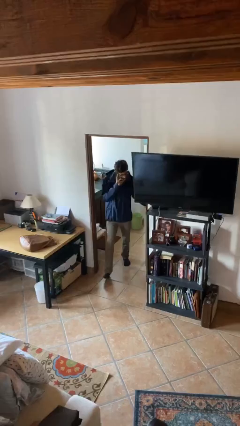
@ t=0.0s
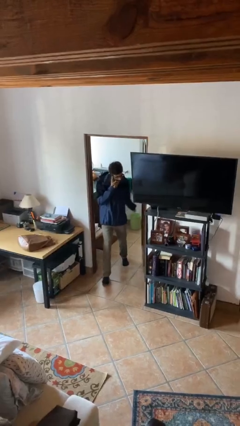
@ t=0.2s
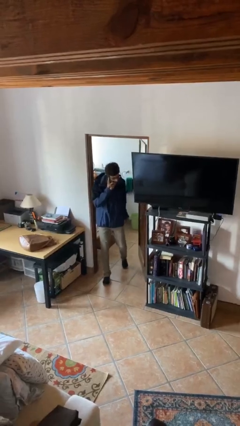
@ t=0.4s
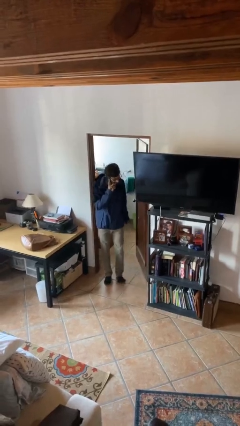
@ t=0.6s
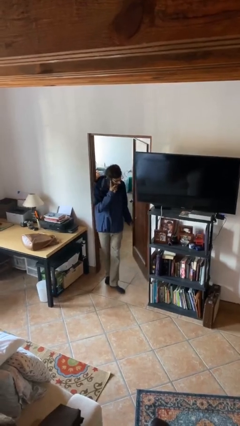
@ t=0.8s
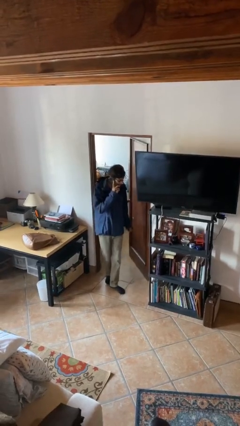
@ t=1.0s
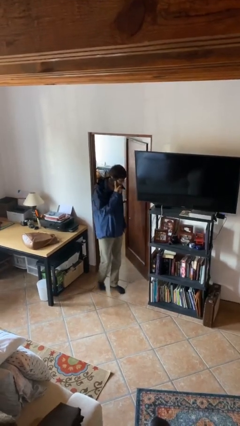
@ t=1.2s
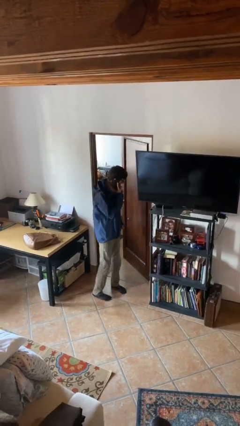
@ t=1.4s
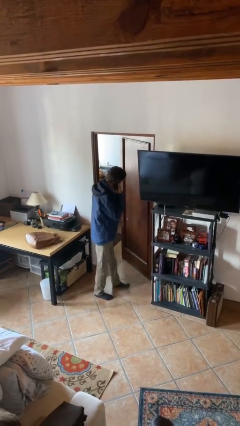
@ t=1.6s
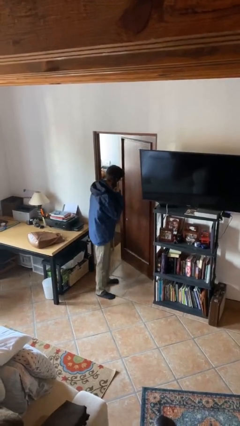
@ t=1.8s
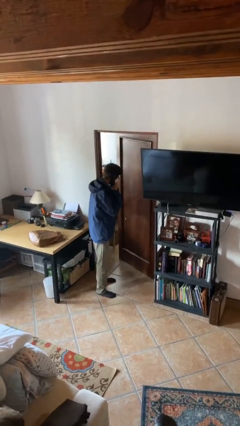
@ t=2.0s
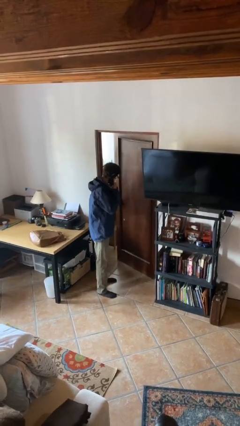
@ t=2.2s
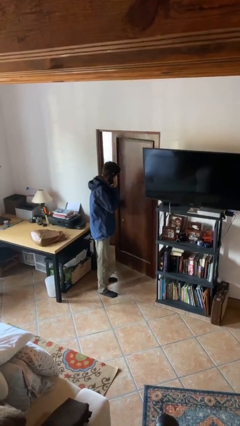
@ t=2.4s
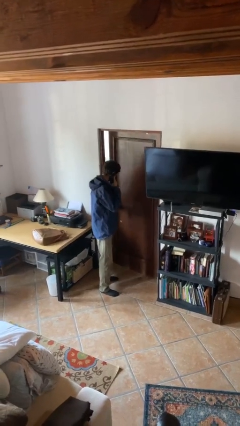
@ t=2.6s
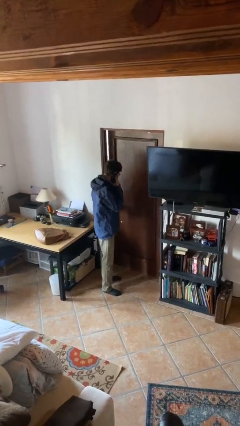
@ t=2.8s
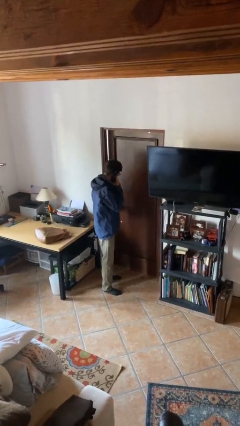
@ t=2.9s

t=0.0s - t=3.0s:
person enters scene through structure

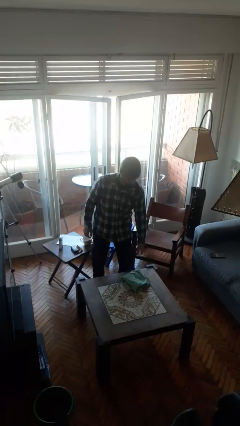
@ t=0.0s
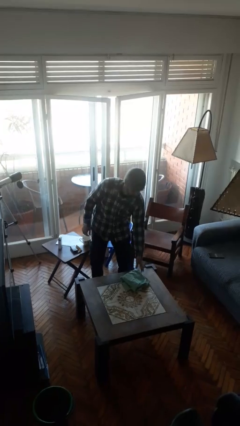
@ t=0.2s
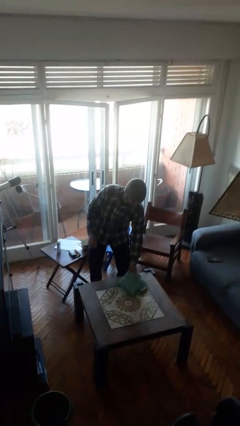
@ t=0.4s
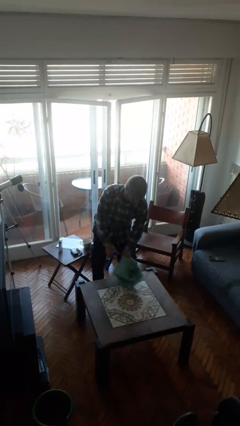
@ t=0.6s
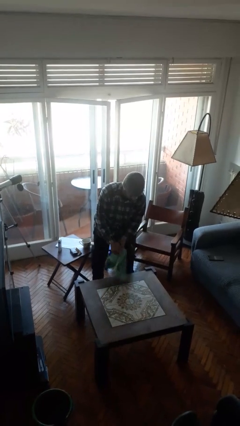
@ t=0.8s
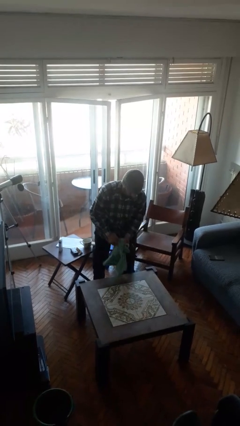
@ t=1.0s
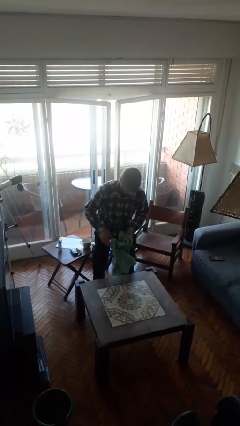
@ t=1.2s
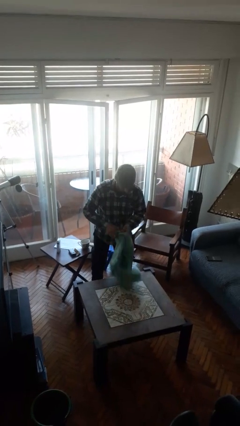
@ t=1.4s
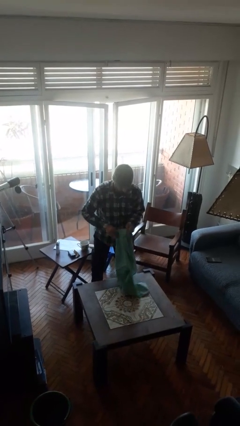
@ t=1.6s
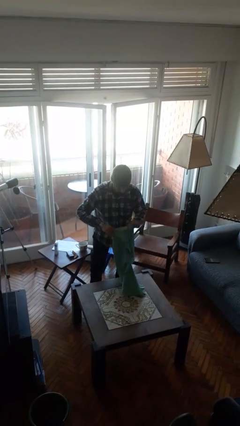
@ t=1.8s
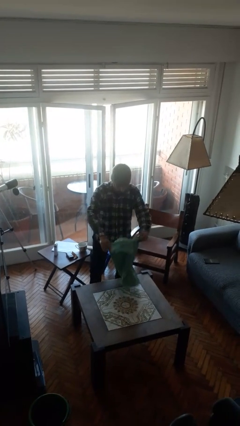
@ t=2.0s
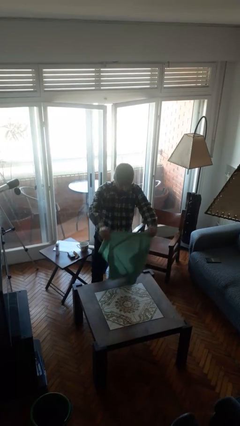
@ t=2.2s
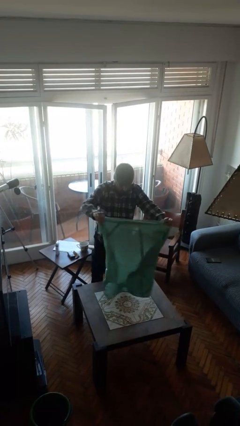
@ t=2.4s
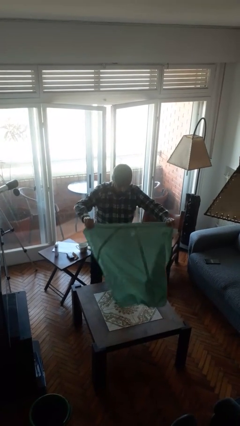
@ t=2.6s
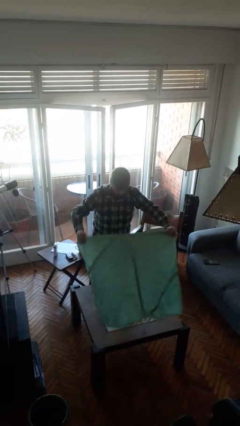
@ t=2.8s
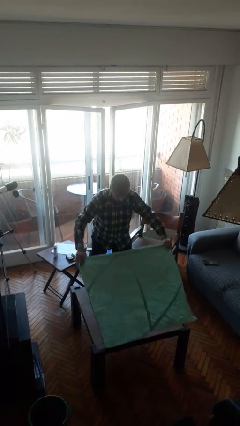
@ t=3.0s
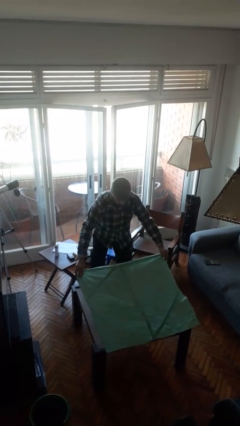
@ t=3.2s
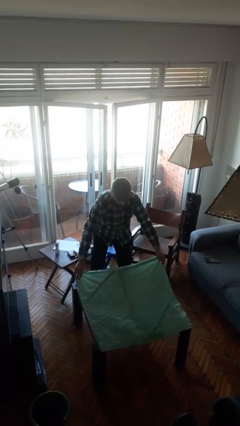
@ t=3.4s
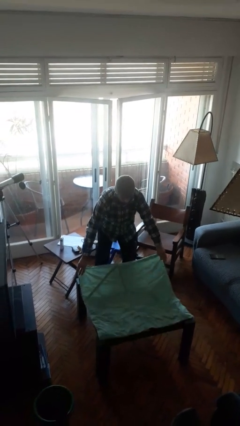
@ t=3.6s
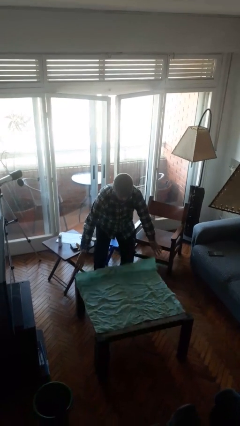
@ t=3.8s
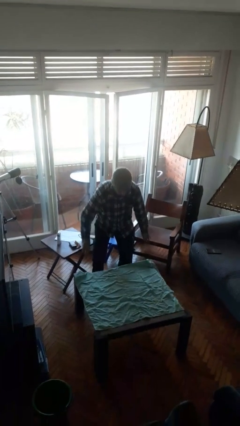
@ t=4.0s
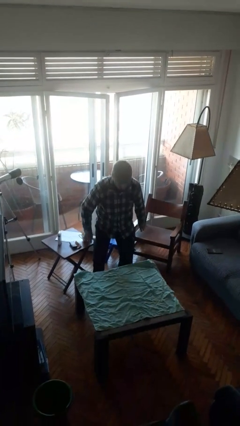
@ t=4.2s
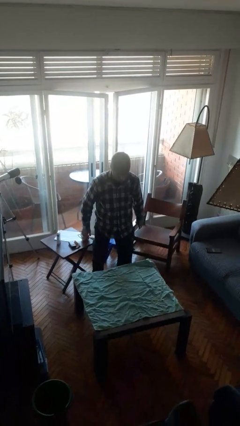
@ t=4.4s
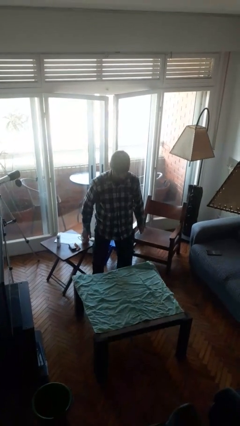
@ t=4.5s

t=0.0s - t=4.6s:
person spreads tablecloth

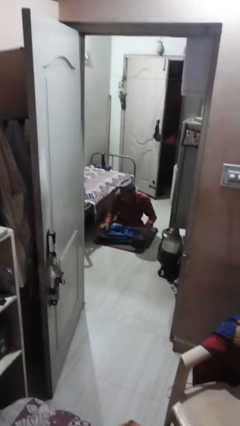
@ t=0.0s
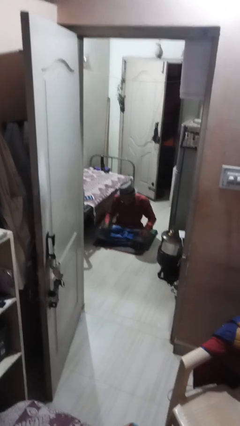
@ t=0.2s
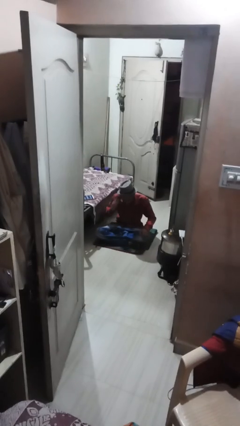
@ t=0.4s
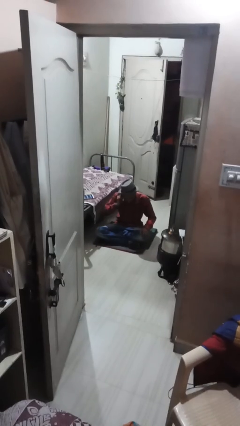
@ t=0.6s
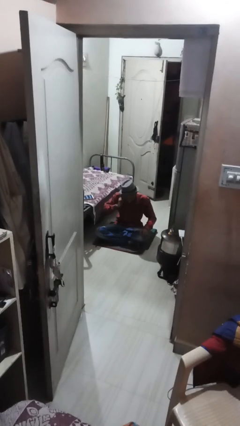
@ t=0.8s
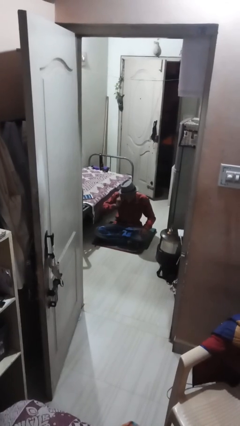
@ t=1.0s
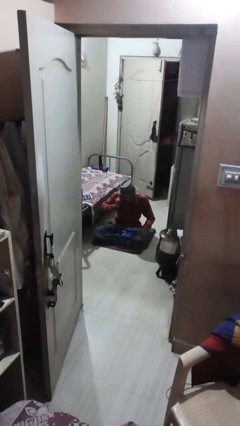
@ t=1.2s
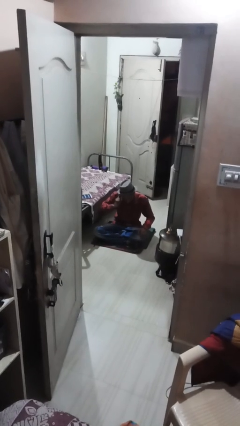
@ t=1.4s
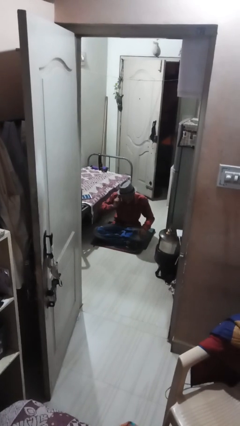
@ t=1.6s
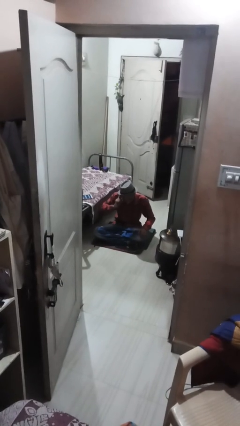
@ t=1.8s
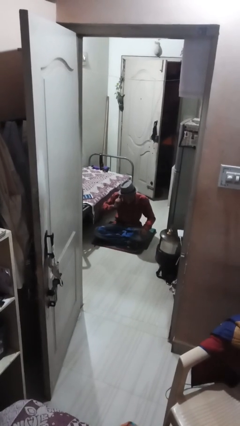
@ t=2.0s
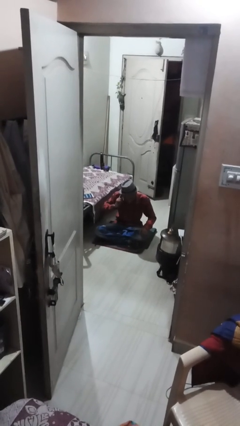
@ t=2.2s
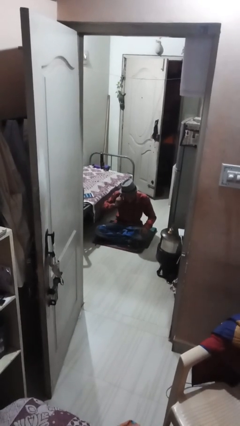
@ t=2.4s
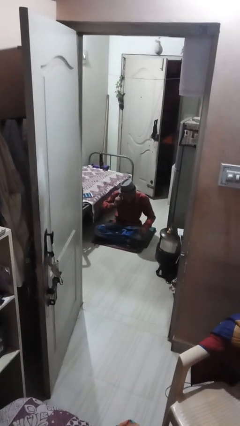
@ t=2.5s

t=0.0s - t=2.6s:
person touches earlobe

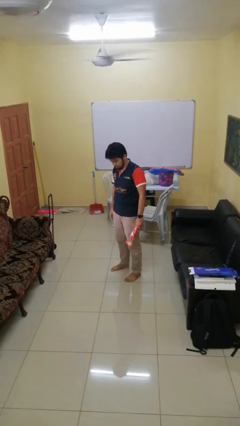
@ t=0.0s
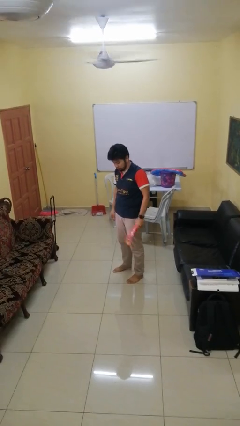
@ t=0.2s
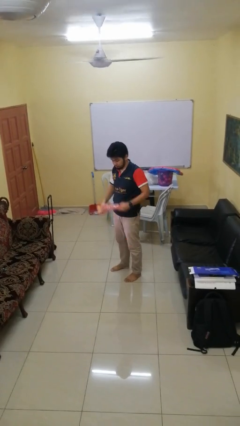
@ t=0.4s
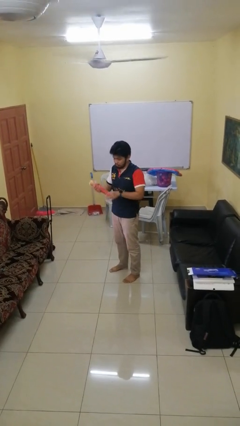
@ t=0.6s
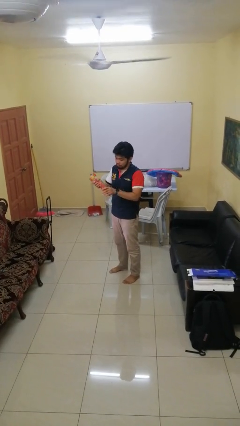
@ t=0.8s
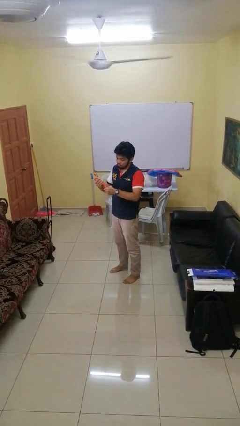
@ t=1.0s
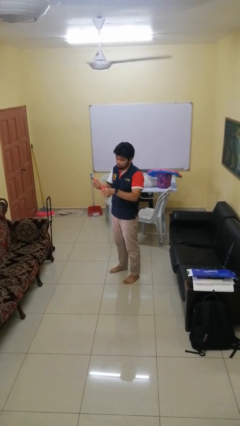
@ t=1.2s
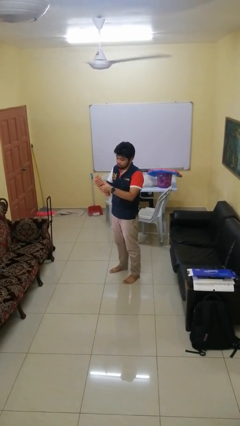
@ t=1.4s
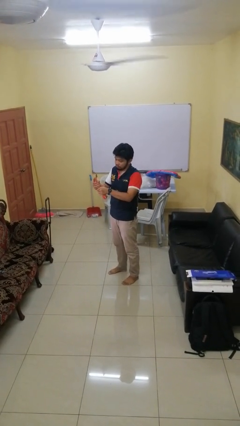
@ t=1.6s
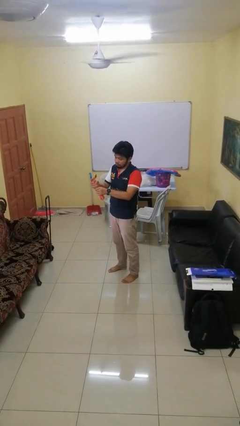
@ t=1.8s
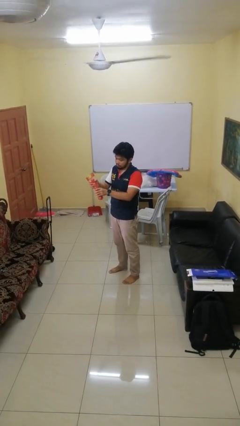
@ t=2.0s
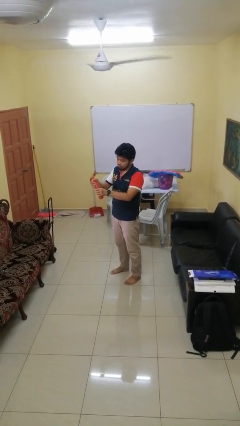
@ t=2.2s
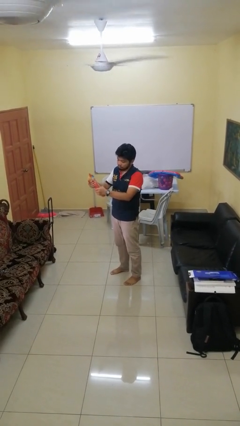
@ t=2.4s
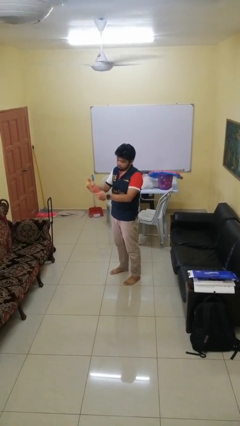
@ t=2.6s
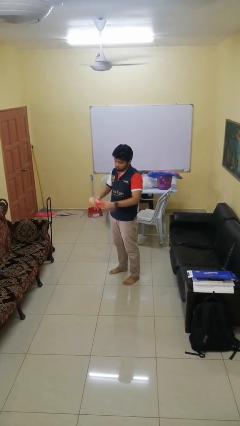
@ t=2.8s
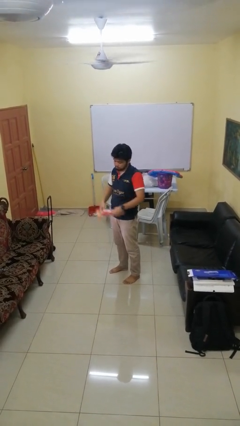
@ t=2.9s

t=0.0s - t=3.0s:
person squeezes object

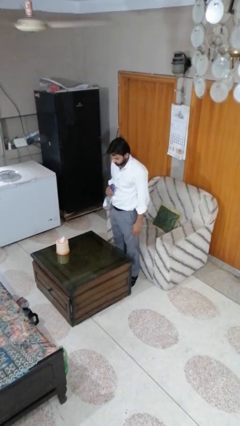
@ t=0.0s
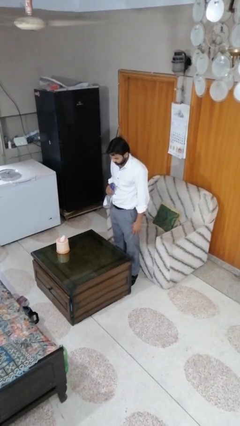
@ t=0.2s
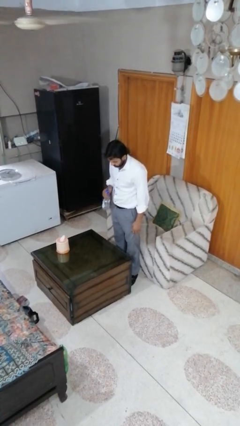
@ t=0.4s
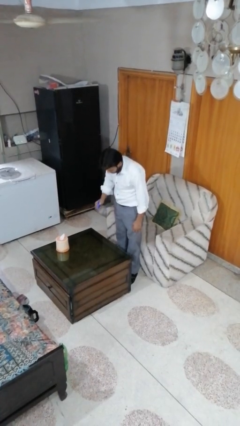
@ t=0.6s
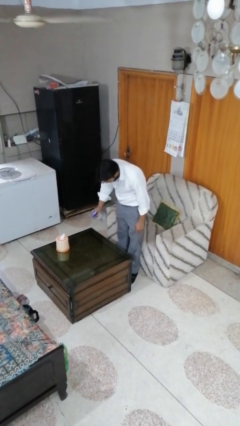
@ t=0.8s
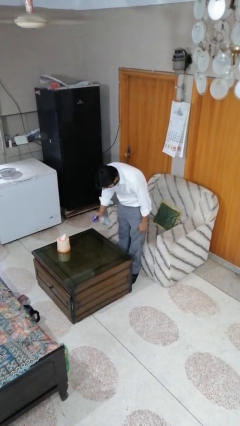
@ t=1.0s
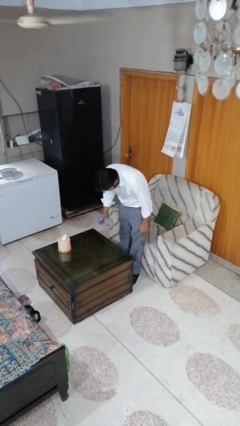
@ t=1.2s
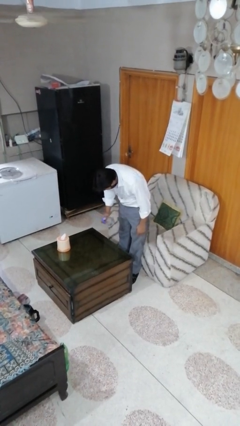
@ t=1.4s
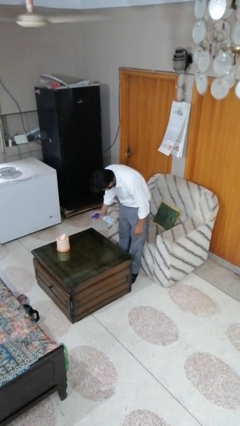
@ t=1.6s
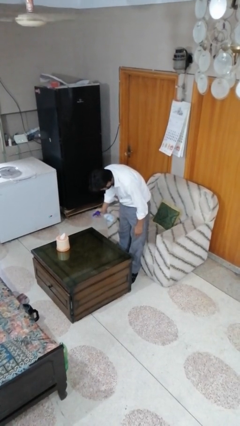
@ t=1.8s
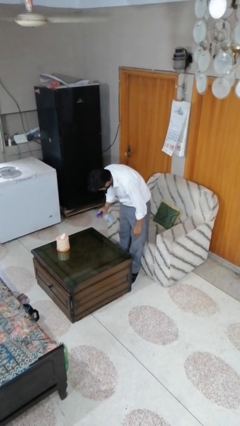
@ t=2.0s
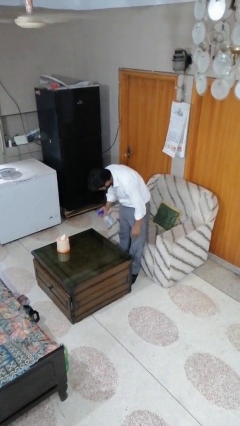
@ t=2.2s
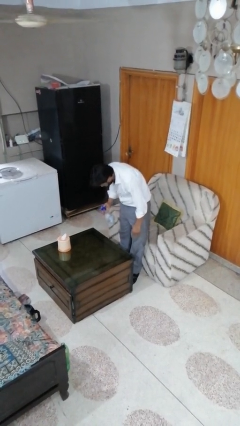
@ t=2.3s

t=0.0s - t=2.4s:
person sprays from bottle

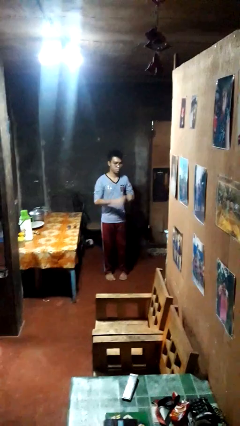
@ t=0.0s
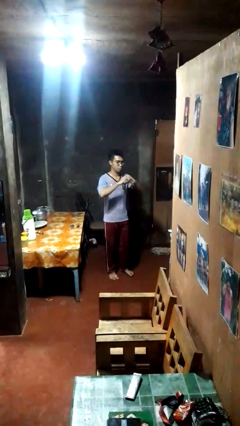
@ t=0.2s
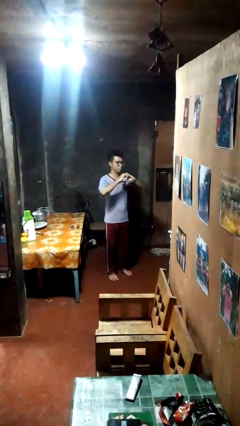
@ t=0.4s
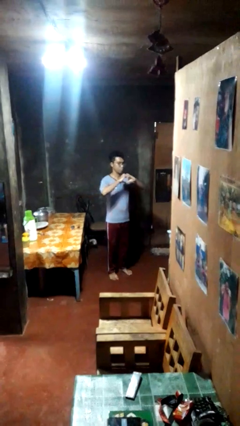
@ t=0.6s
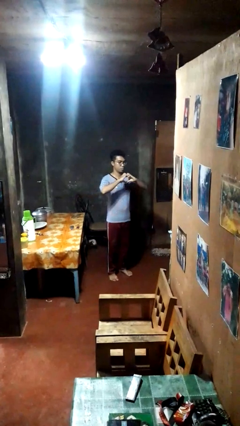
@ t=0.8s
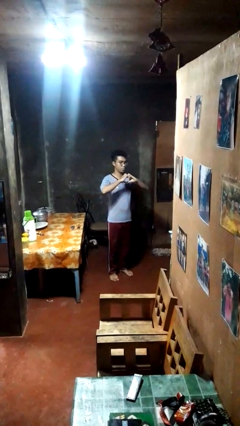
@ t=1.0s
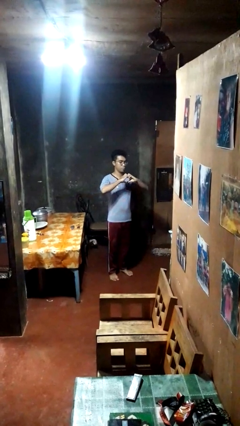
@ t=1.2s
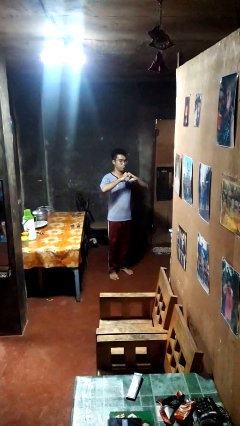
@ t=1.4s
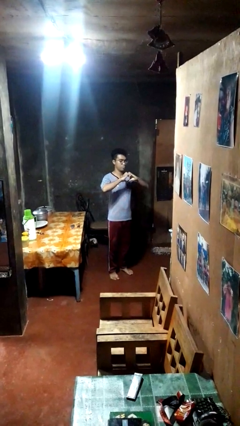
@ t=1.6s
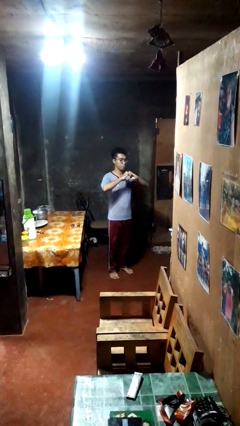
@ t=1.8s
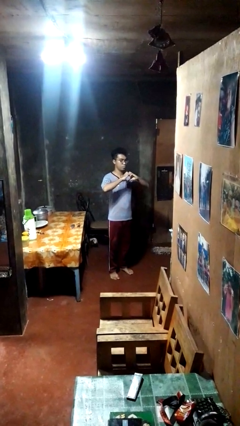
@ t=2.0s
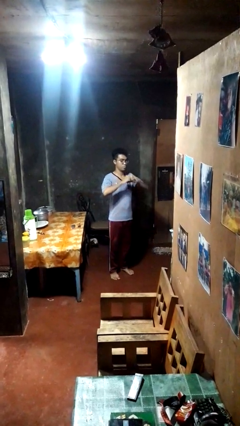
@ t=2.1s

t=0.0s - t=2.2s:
person gestures heart
